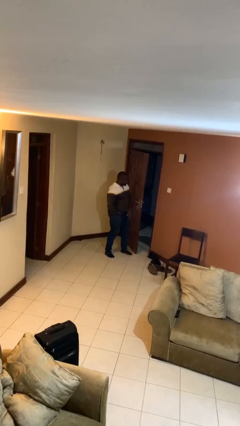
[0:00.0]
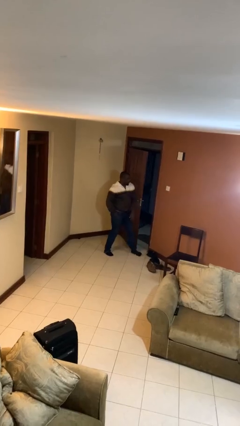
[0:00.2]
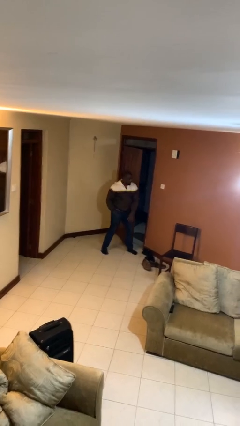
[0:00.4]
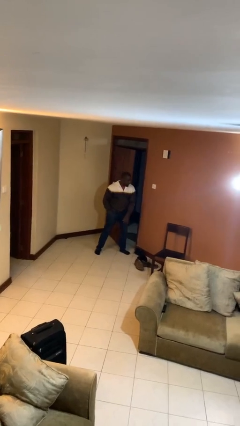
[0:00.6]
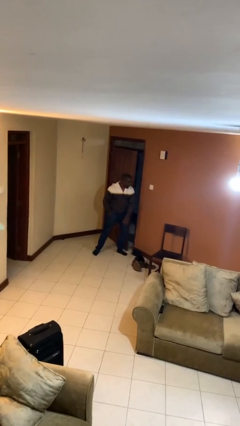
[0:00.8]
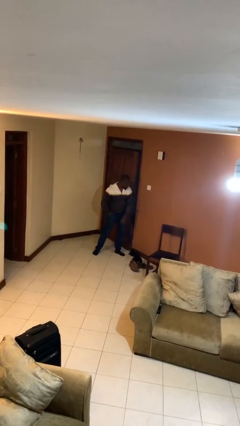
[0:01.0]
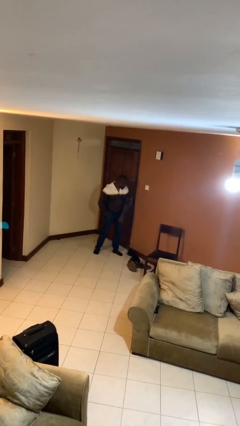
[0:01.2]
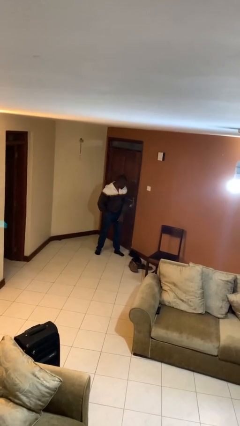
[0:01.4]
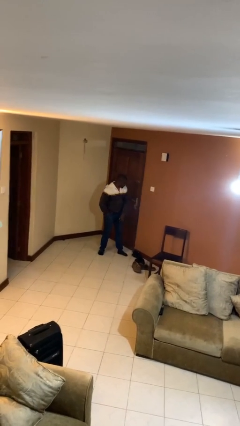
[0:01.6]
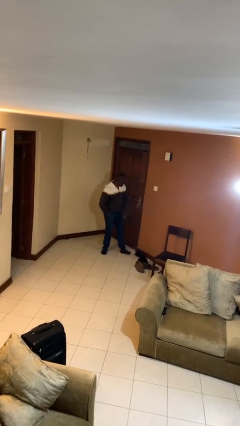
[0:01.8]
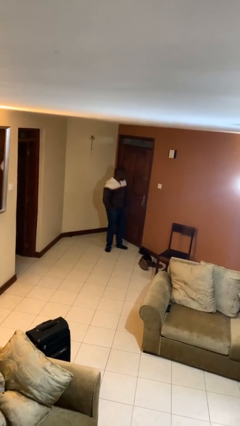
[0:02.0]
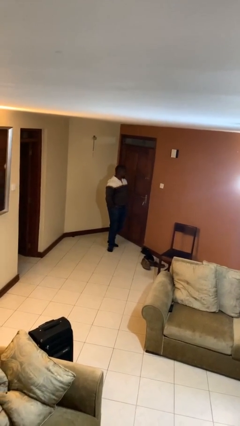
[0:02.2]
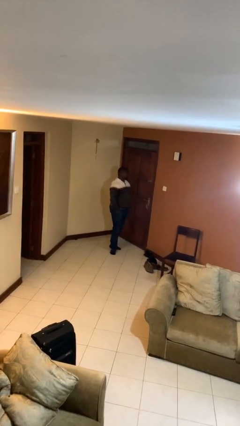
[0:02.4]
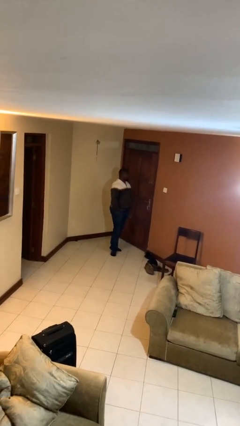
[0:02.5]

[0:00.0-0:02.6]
person closes door with hip

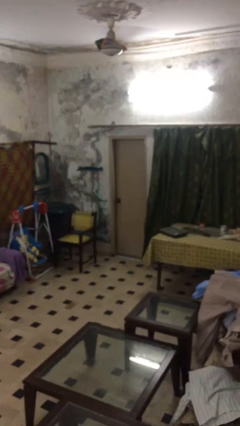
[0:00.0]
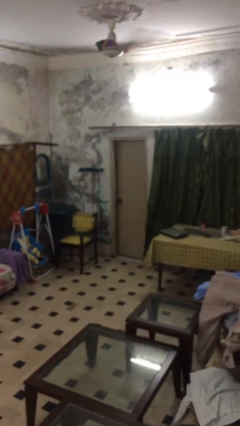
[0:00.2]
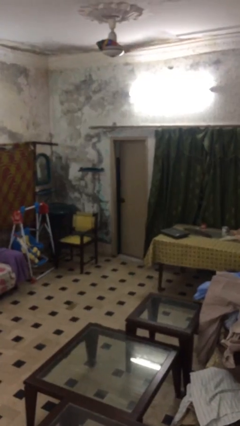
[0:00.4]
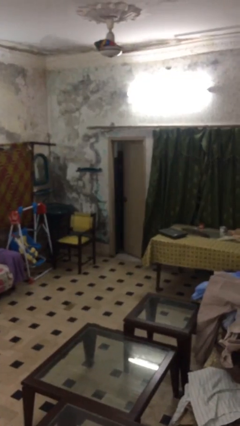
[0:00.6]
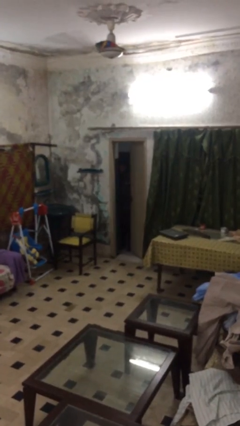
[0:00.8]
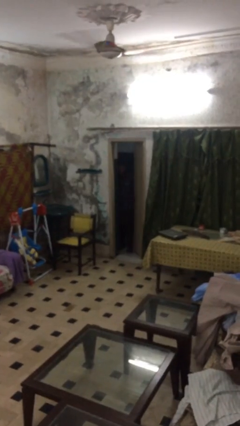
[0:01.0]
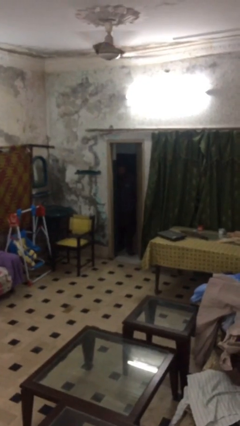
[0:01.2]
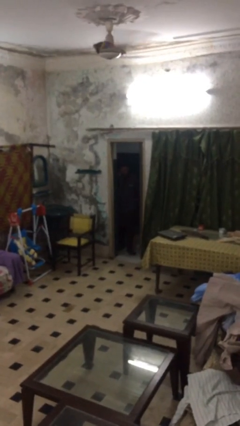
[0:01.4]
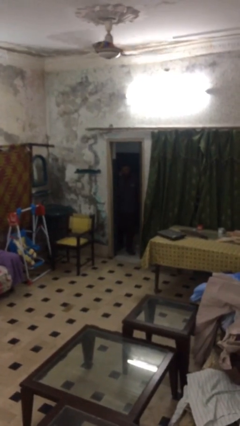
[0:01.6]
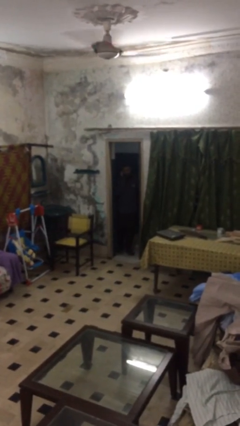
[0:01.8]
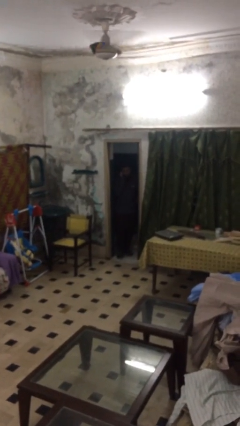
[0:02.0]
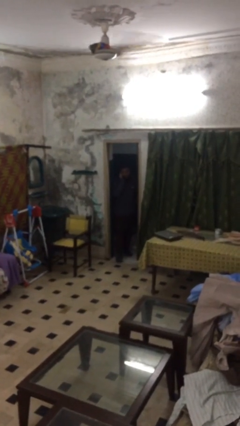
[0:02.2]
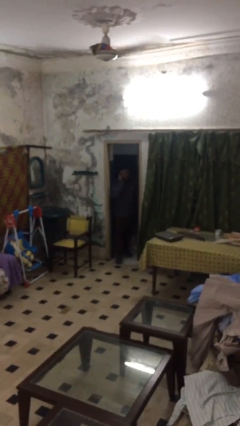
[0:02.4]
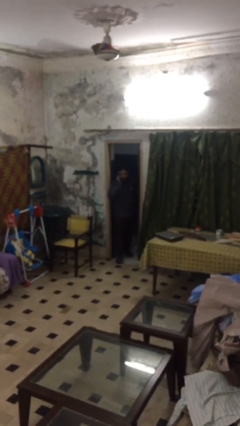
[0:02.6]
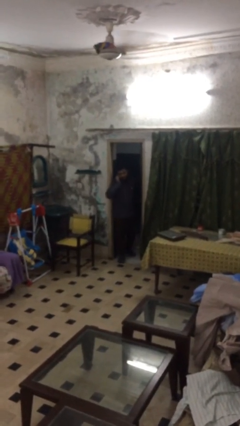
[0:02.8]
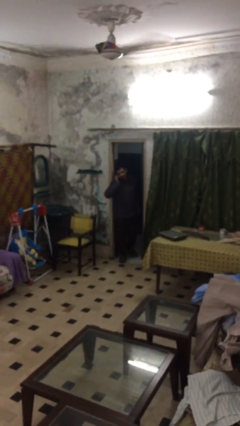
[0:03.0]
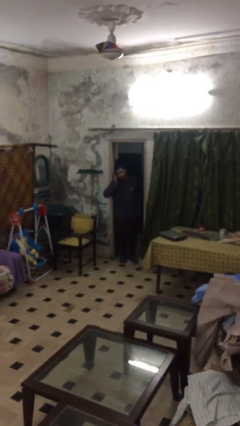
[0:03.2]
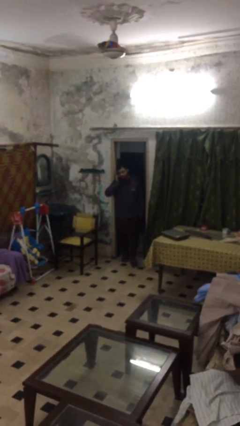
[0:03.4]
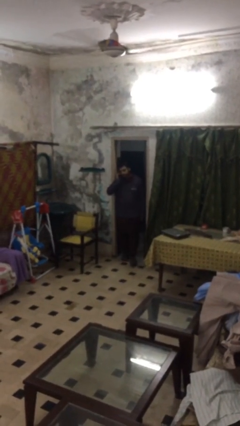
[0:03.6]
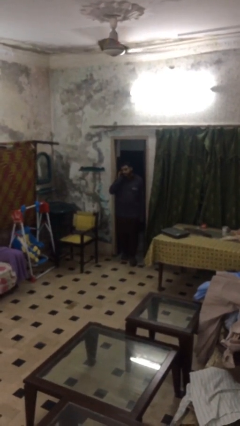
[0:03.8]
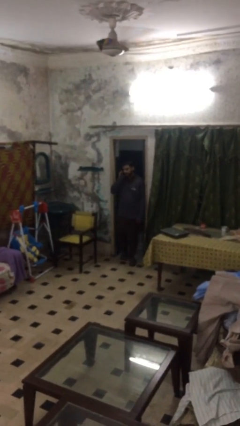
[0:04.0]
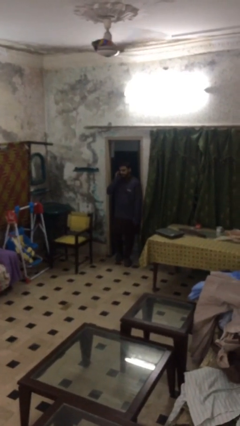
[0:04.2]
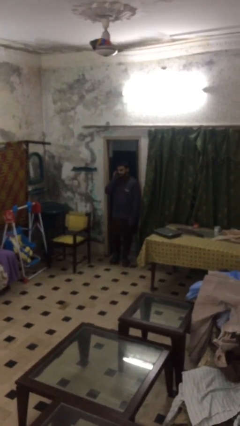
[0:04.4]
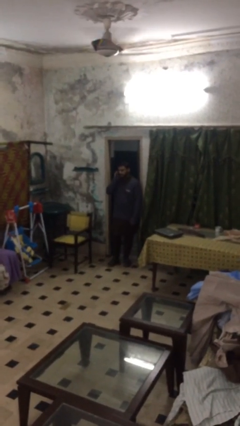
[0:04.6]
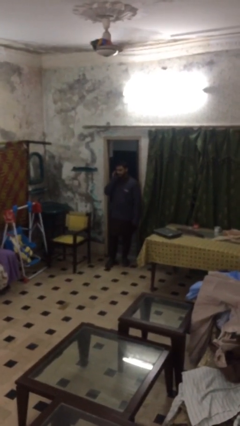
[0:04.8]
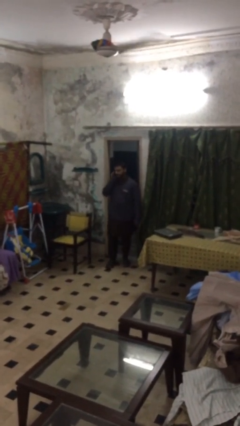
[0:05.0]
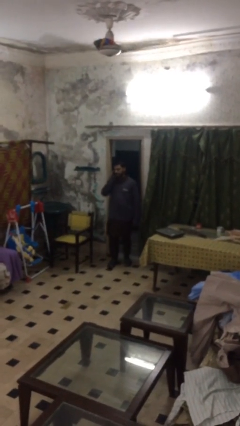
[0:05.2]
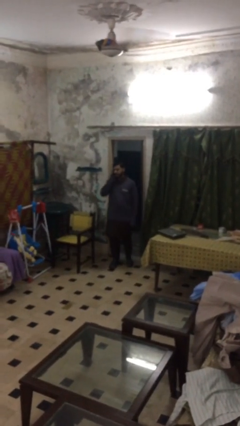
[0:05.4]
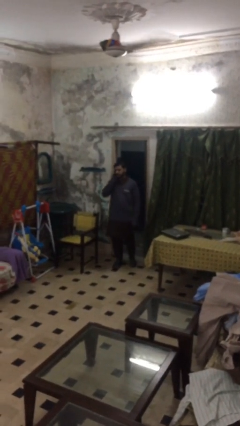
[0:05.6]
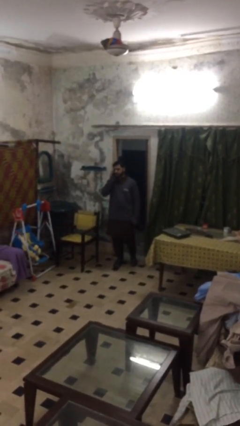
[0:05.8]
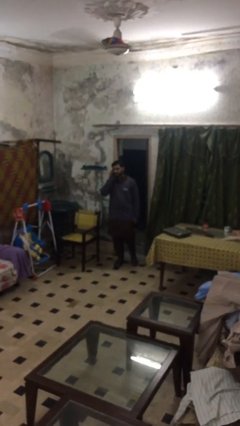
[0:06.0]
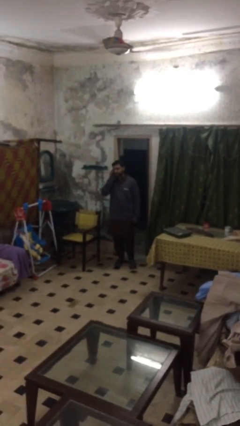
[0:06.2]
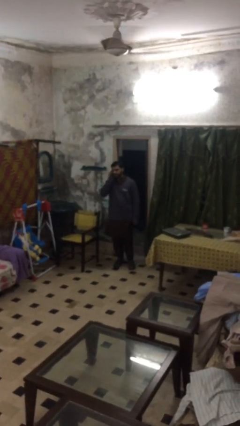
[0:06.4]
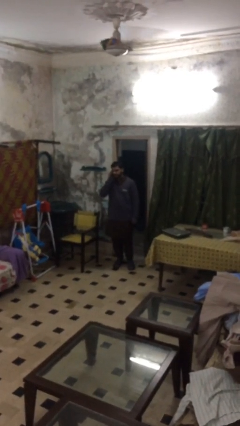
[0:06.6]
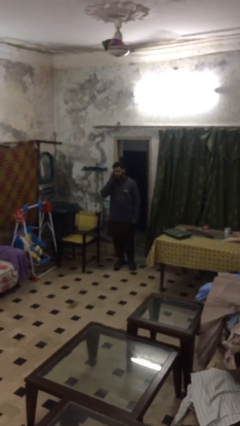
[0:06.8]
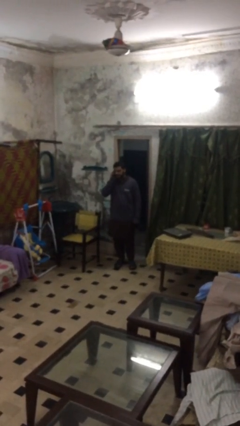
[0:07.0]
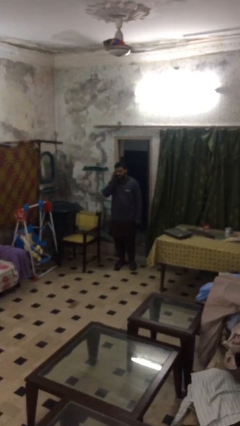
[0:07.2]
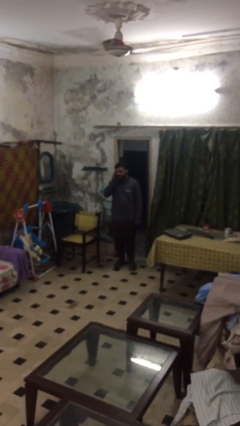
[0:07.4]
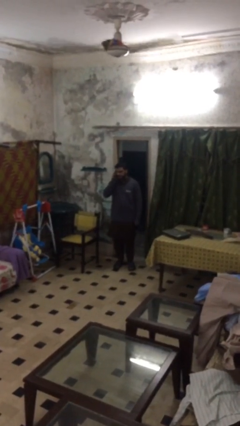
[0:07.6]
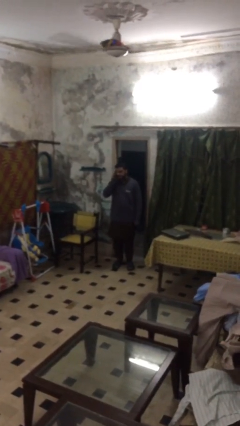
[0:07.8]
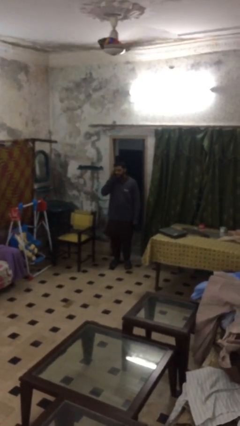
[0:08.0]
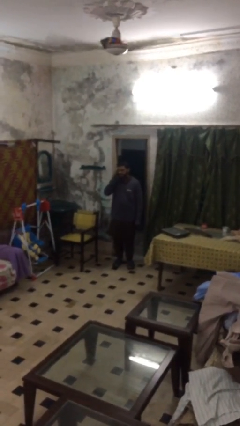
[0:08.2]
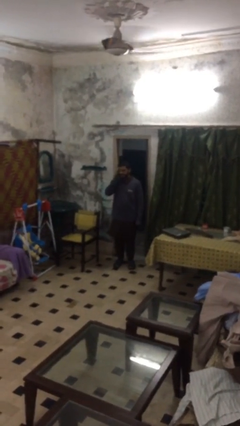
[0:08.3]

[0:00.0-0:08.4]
person enters scene through structure

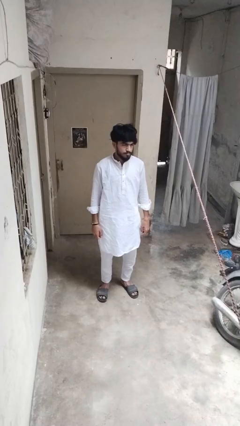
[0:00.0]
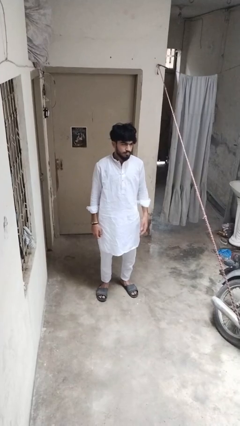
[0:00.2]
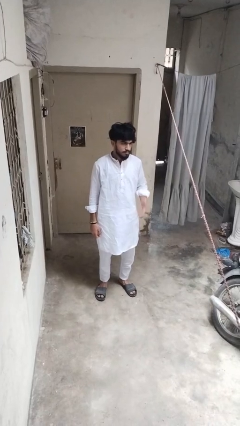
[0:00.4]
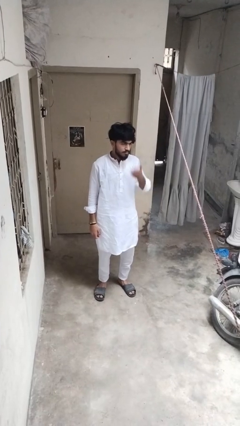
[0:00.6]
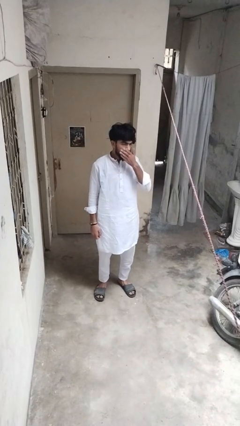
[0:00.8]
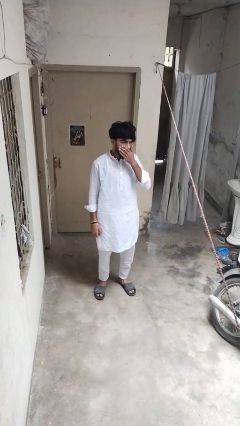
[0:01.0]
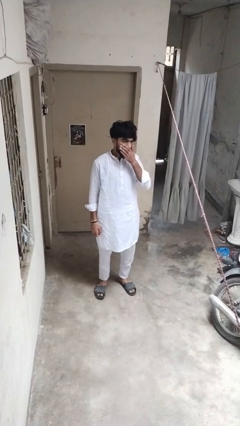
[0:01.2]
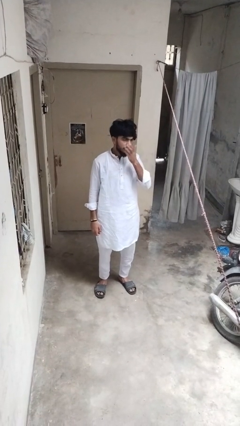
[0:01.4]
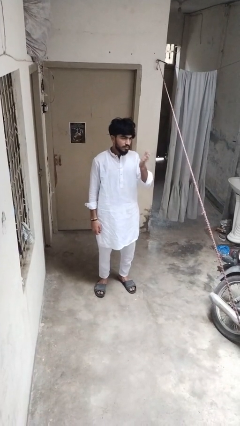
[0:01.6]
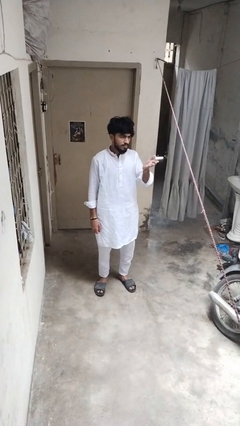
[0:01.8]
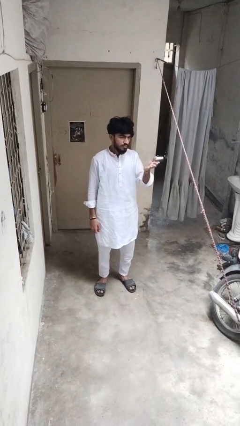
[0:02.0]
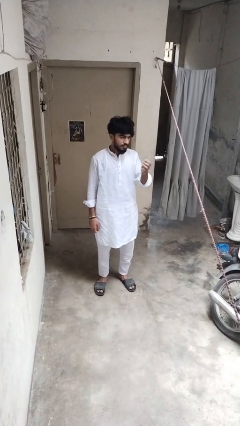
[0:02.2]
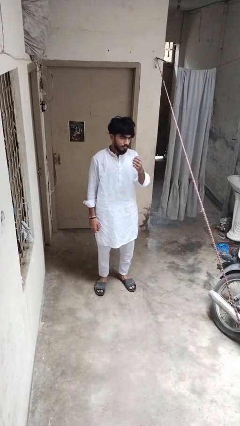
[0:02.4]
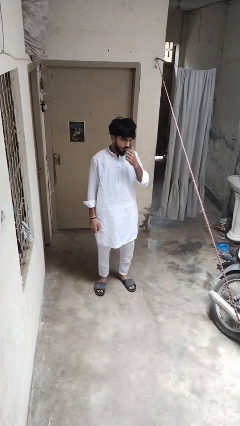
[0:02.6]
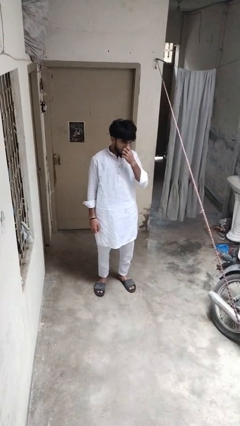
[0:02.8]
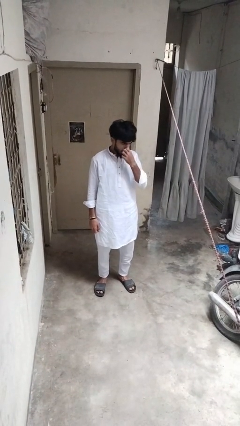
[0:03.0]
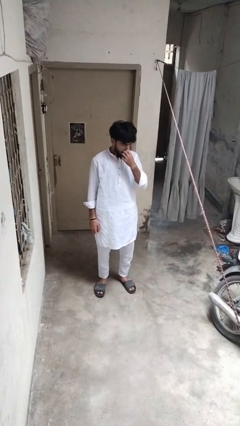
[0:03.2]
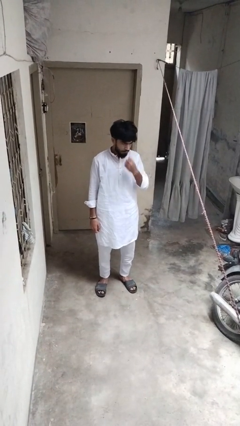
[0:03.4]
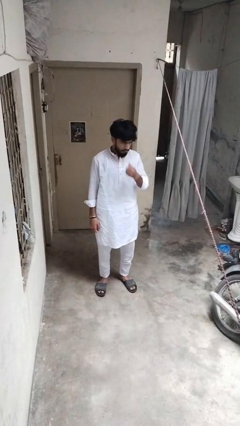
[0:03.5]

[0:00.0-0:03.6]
person gestures blow kiss

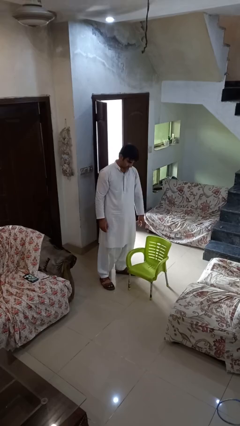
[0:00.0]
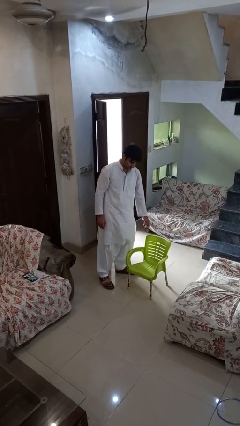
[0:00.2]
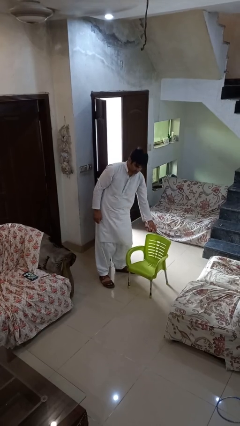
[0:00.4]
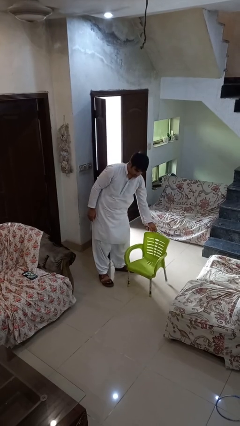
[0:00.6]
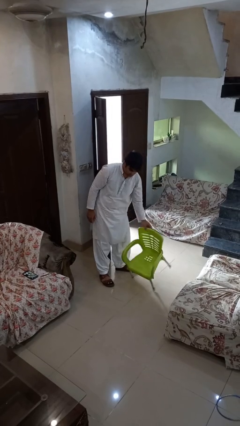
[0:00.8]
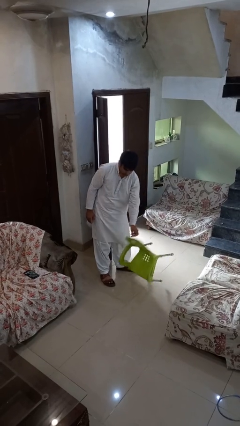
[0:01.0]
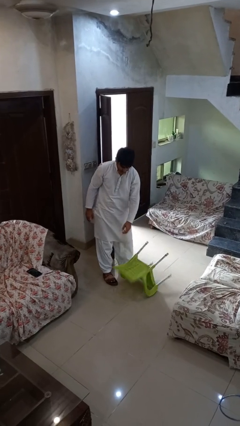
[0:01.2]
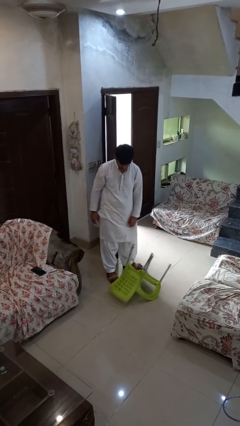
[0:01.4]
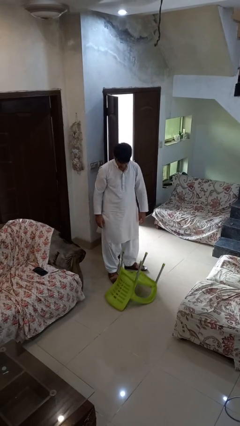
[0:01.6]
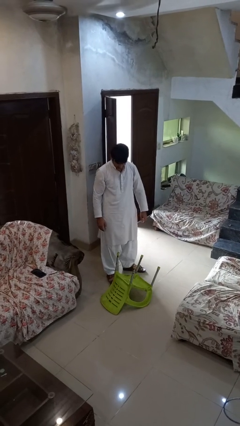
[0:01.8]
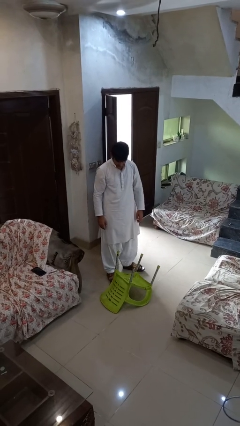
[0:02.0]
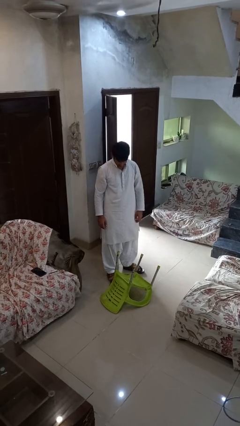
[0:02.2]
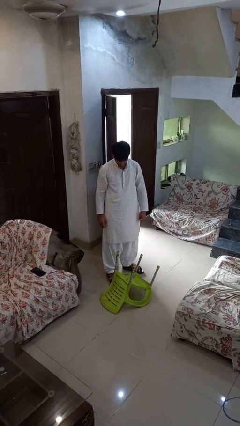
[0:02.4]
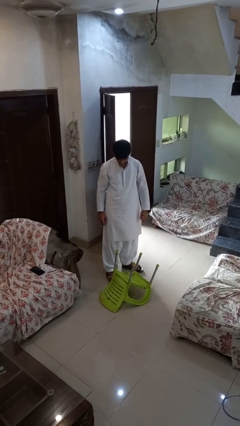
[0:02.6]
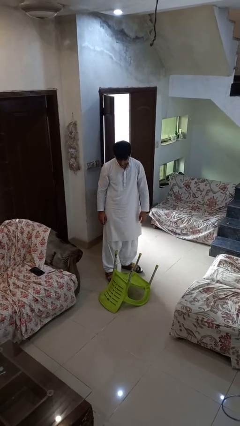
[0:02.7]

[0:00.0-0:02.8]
person knocks over furniture

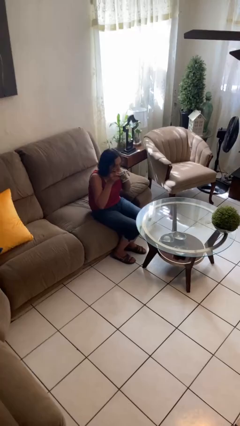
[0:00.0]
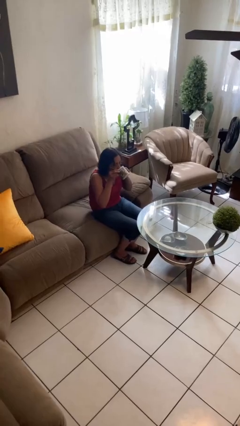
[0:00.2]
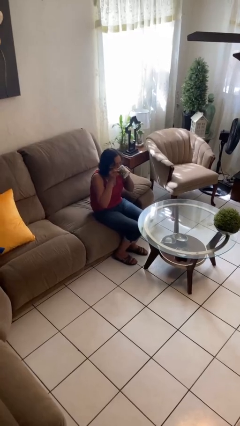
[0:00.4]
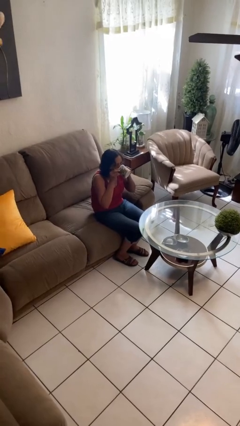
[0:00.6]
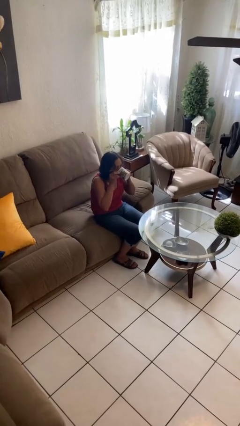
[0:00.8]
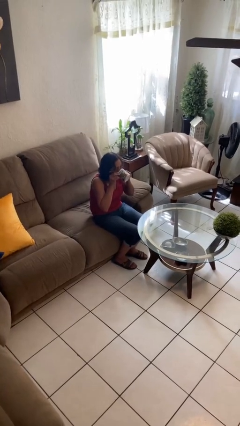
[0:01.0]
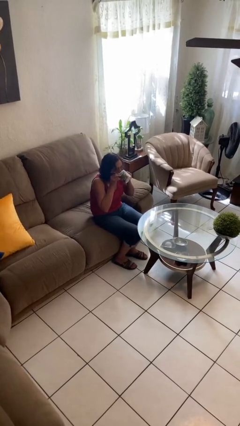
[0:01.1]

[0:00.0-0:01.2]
person drinks from mug
